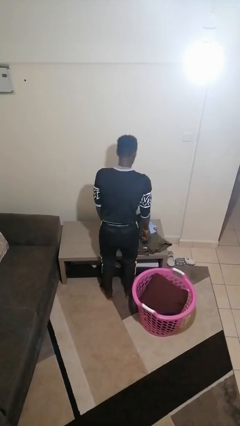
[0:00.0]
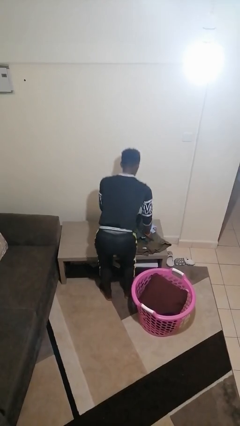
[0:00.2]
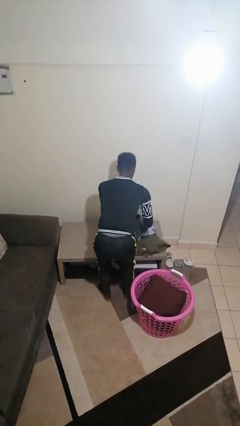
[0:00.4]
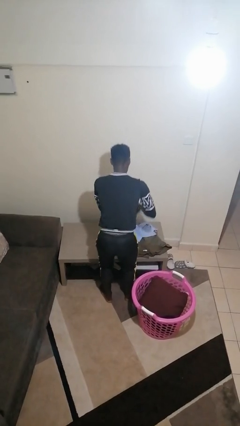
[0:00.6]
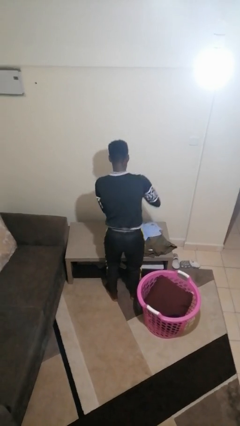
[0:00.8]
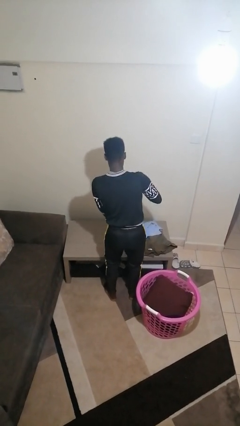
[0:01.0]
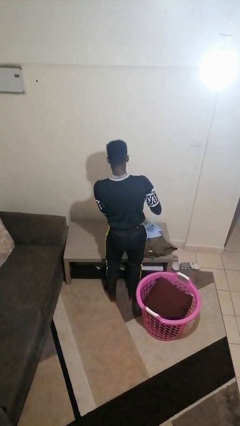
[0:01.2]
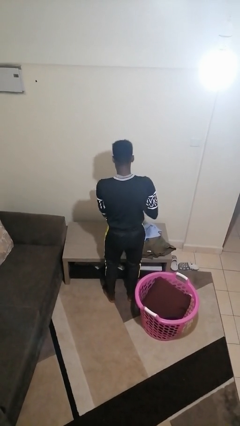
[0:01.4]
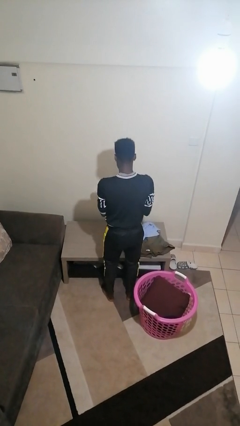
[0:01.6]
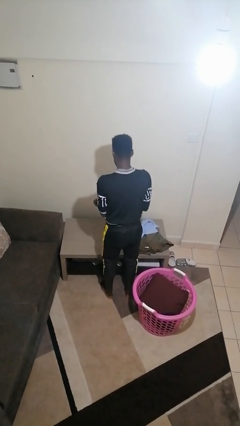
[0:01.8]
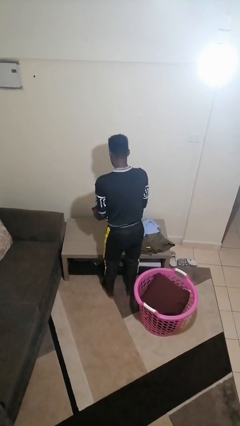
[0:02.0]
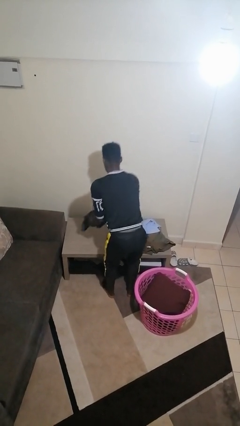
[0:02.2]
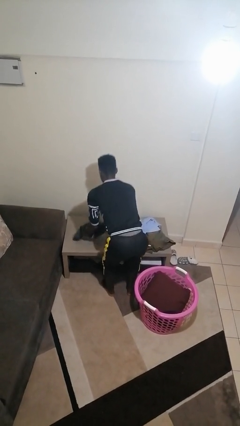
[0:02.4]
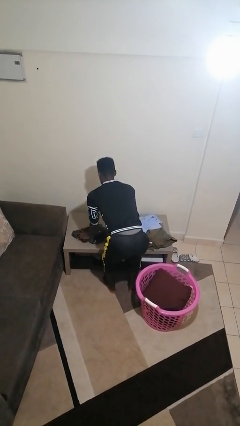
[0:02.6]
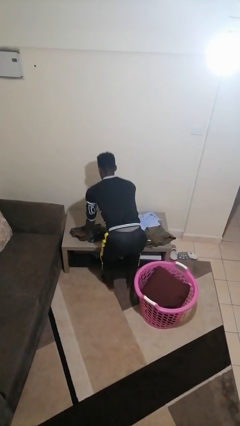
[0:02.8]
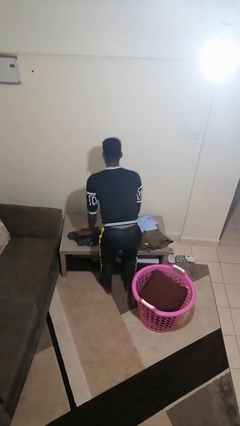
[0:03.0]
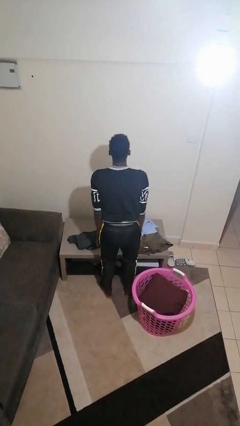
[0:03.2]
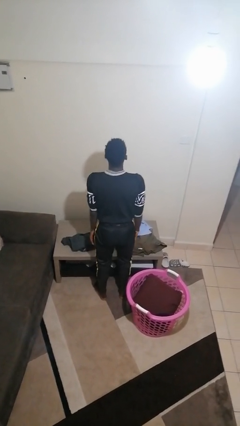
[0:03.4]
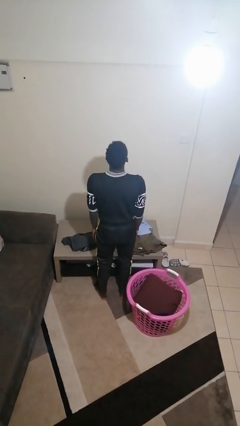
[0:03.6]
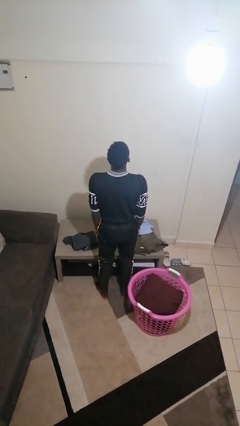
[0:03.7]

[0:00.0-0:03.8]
person folds pants

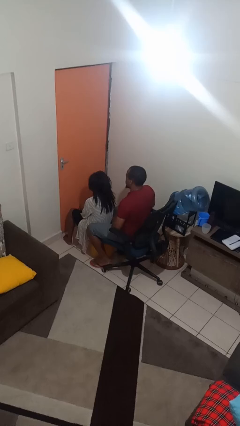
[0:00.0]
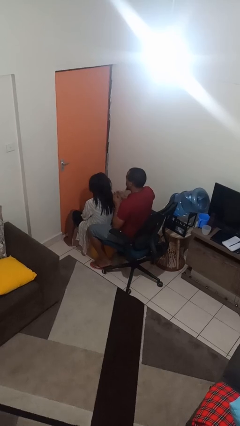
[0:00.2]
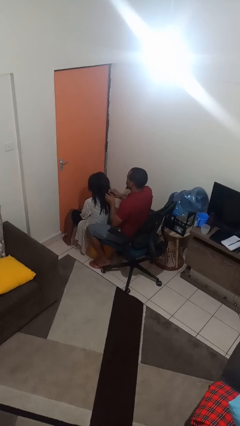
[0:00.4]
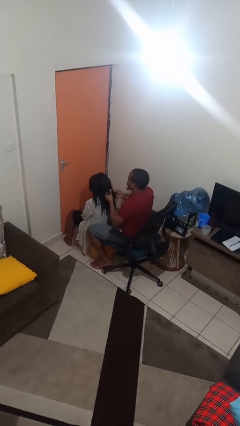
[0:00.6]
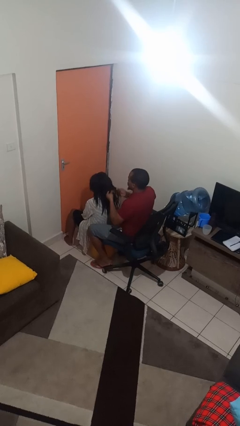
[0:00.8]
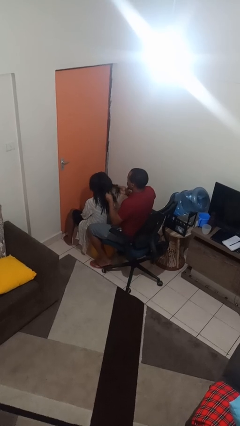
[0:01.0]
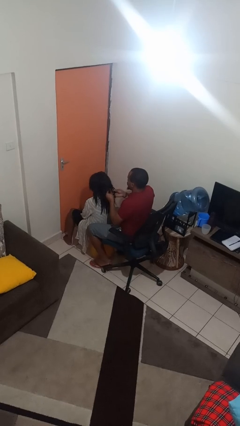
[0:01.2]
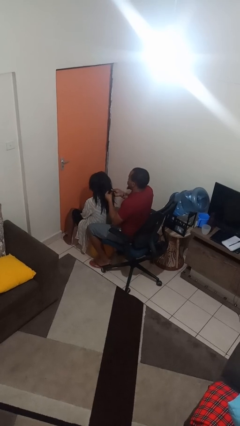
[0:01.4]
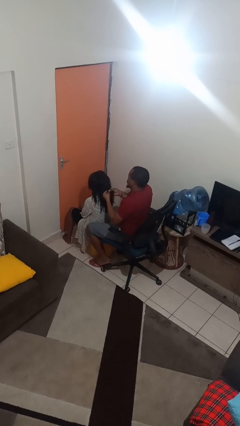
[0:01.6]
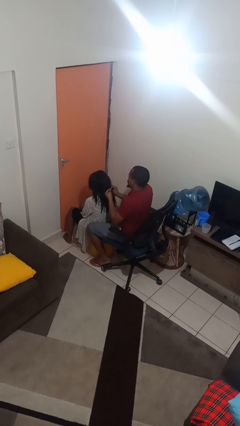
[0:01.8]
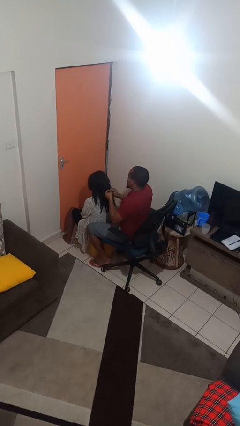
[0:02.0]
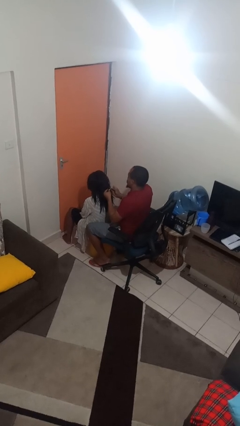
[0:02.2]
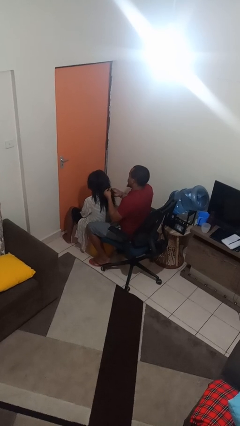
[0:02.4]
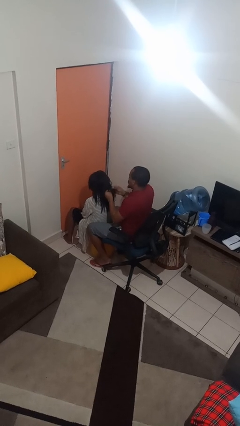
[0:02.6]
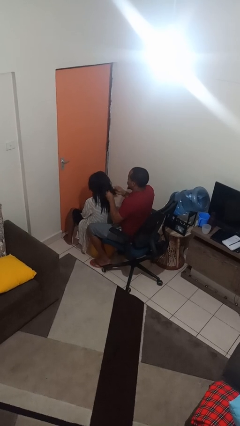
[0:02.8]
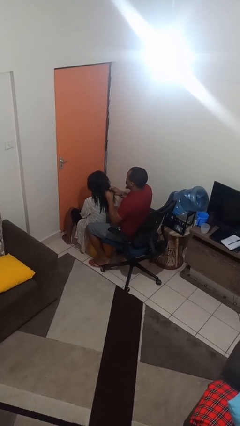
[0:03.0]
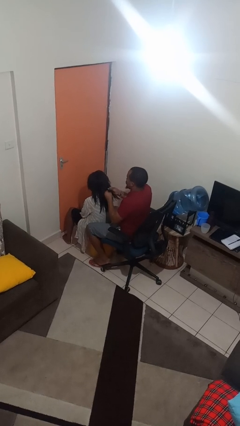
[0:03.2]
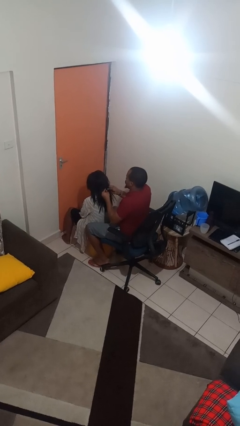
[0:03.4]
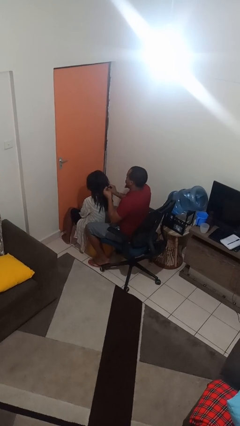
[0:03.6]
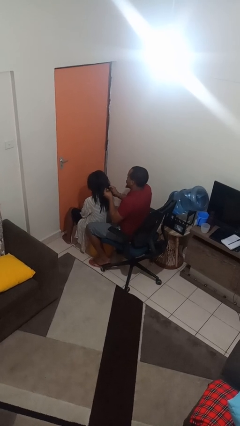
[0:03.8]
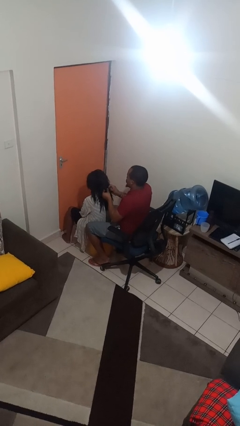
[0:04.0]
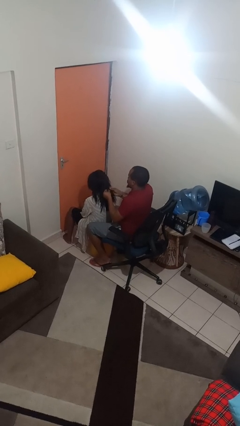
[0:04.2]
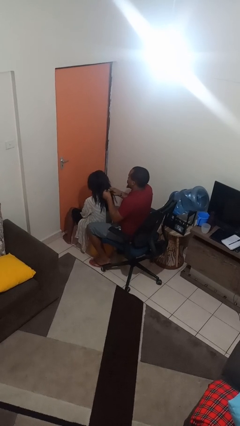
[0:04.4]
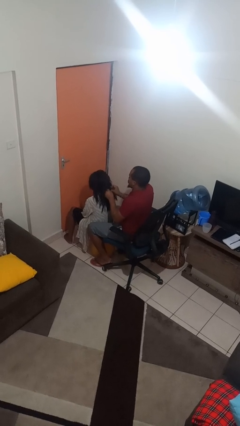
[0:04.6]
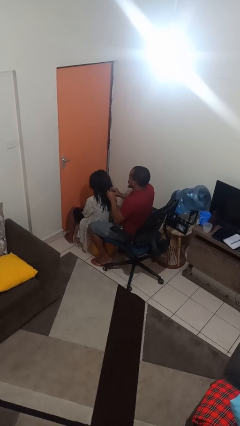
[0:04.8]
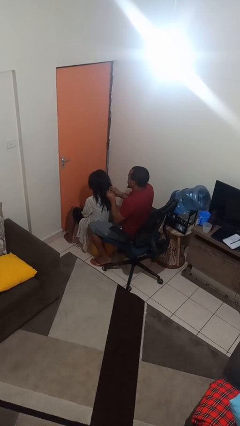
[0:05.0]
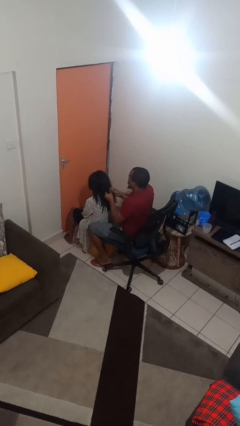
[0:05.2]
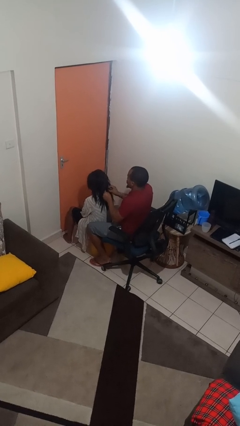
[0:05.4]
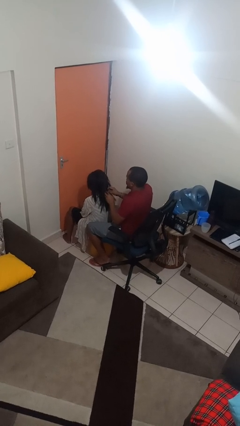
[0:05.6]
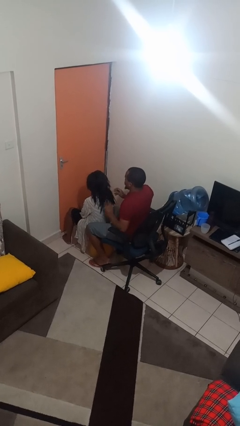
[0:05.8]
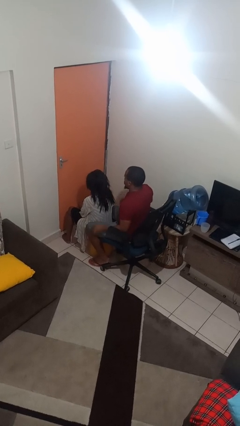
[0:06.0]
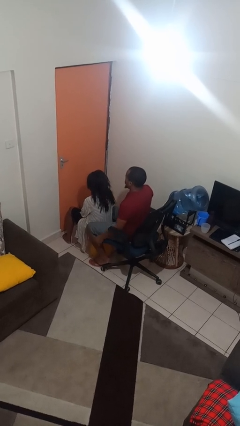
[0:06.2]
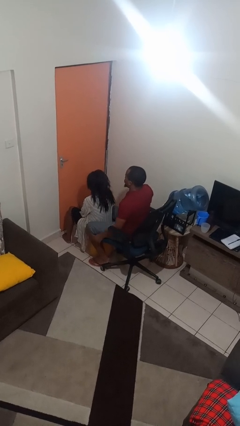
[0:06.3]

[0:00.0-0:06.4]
person braids hair of person

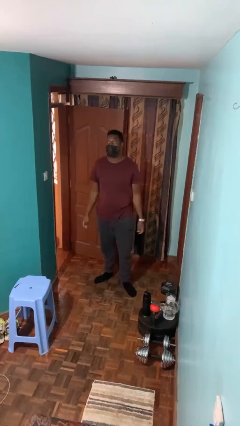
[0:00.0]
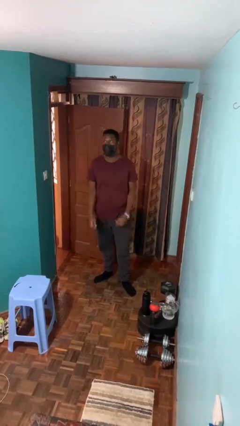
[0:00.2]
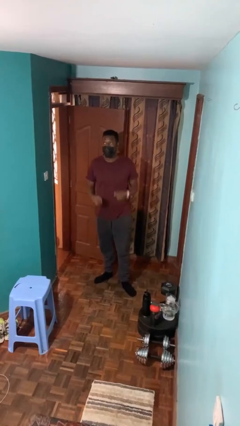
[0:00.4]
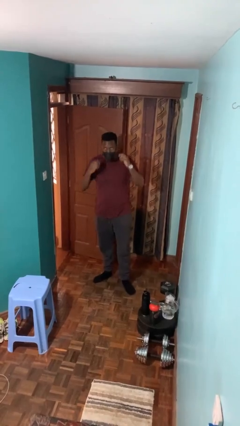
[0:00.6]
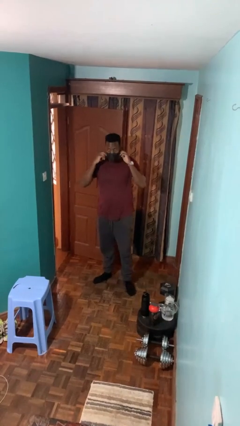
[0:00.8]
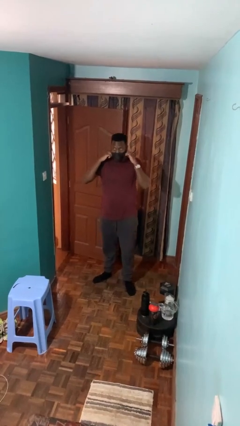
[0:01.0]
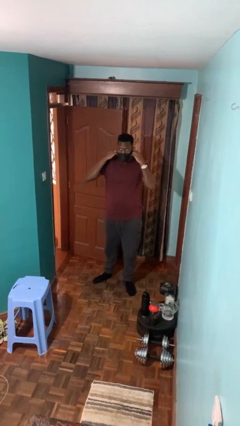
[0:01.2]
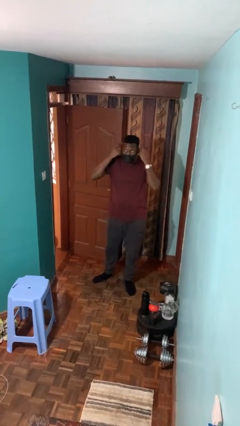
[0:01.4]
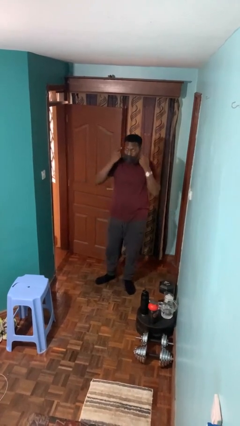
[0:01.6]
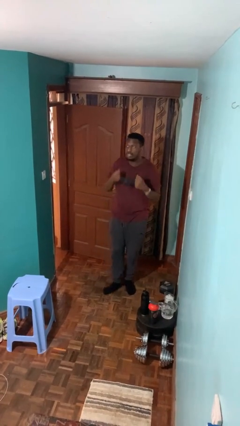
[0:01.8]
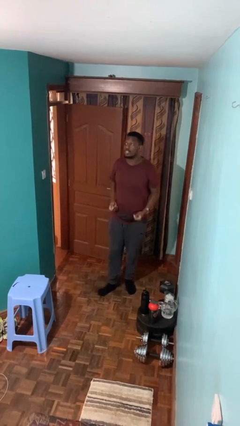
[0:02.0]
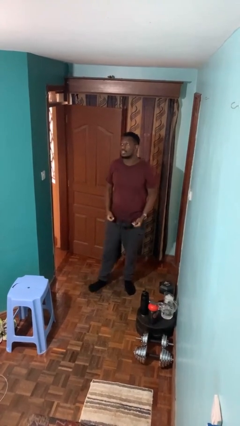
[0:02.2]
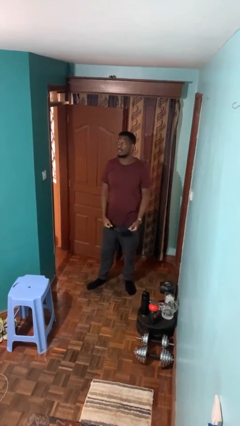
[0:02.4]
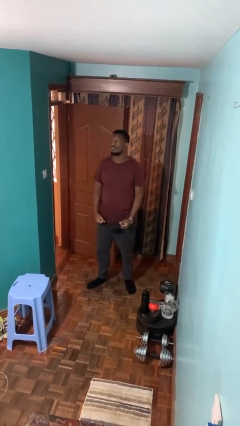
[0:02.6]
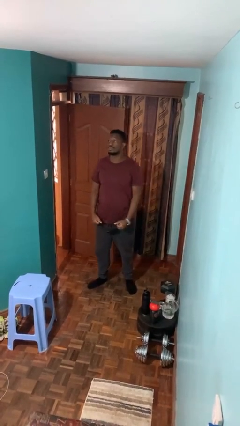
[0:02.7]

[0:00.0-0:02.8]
person takes off facemask

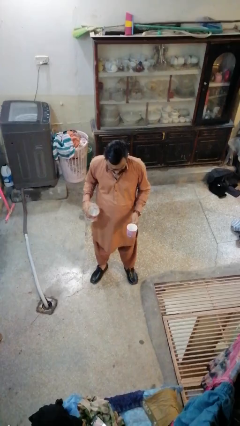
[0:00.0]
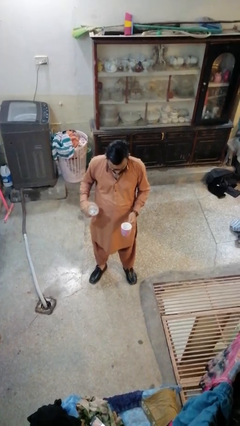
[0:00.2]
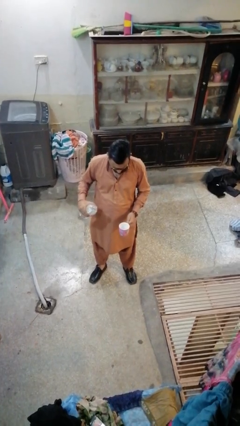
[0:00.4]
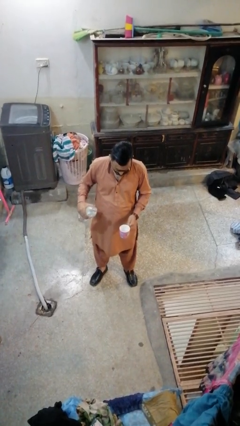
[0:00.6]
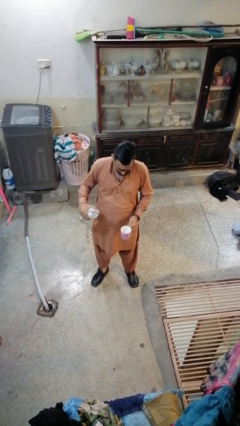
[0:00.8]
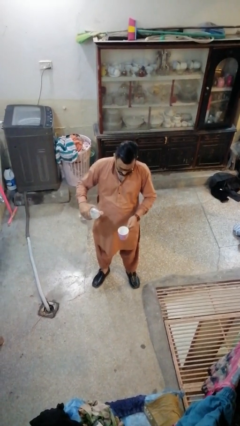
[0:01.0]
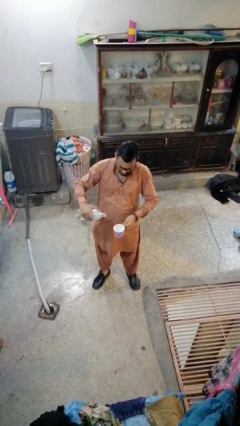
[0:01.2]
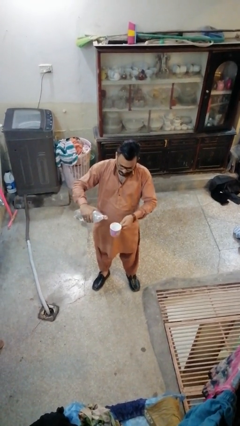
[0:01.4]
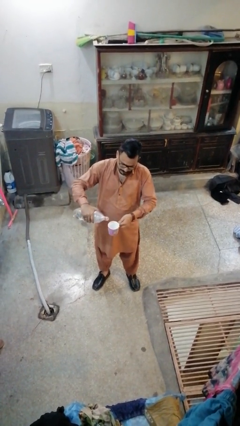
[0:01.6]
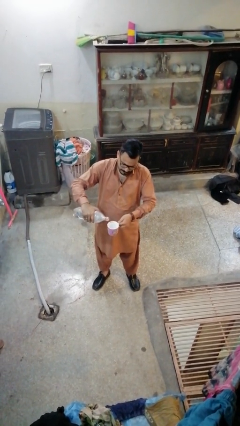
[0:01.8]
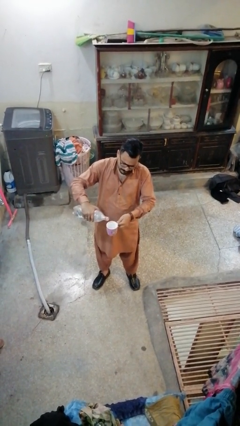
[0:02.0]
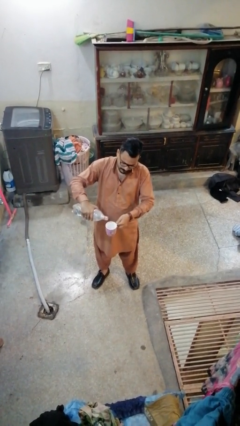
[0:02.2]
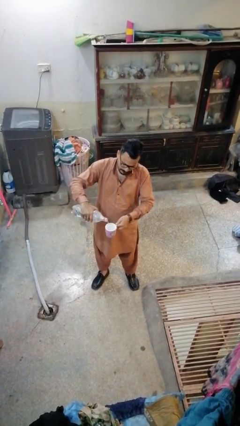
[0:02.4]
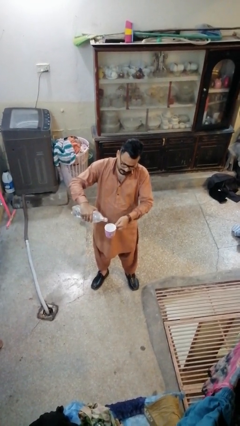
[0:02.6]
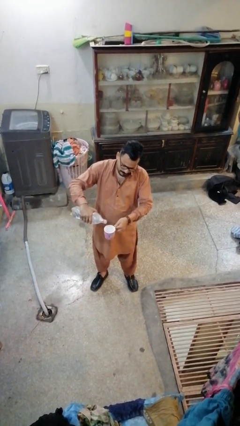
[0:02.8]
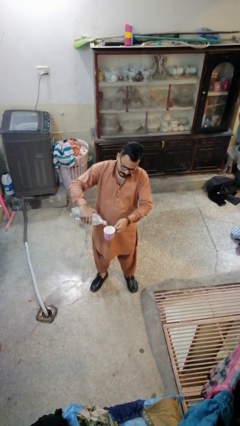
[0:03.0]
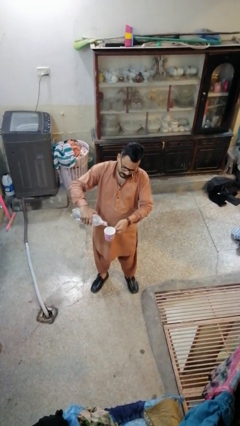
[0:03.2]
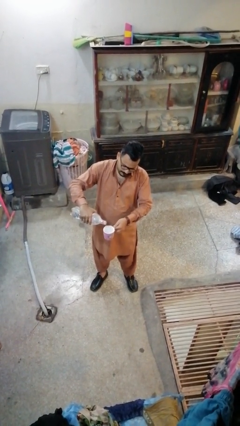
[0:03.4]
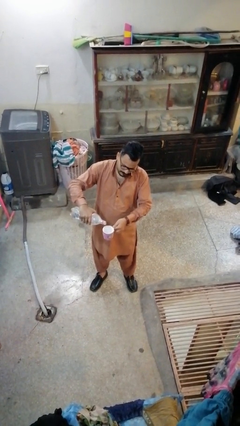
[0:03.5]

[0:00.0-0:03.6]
person pours liquid into cup

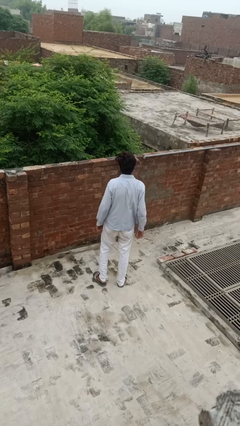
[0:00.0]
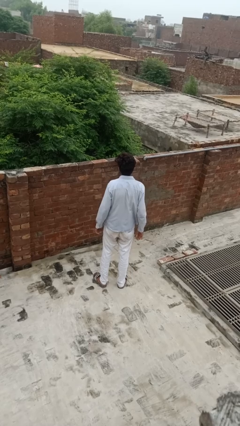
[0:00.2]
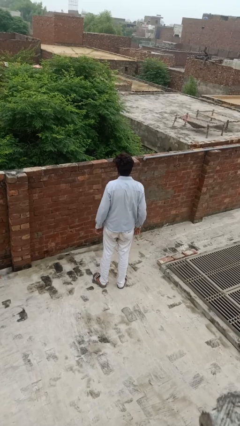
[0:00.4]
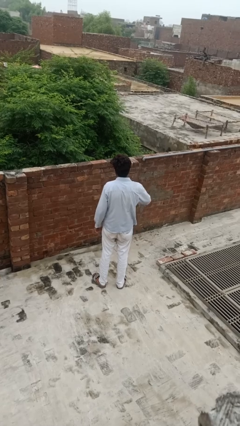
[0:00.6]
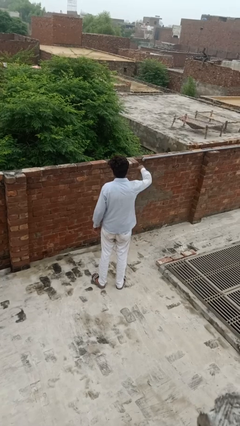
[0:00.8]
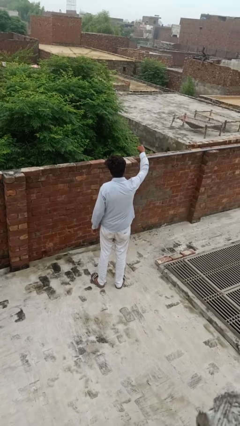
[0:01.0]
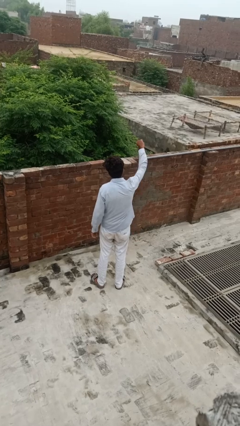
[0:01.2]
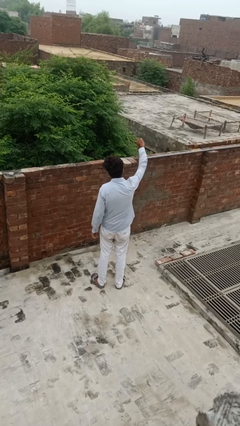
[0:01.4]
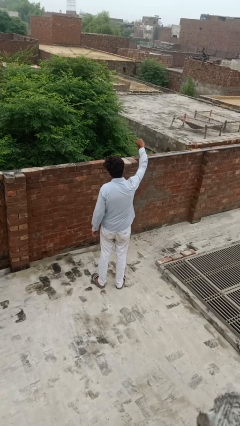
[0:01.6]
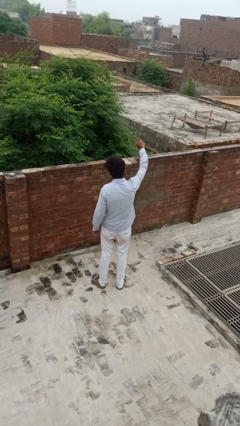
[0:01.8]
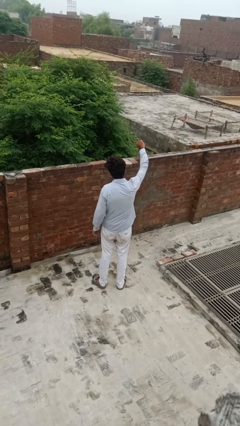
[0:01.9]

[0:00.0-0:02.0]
person gestures thumbs down
